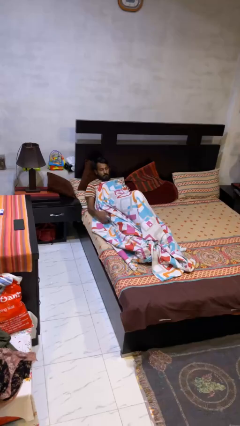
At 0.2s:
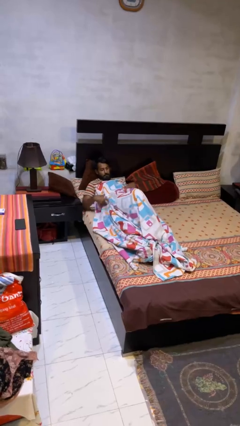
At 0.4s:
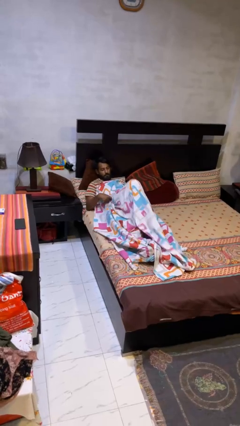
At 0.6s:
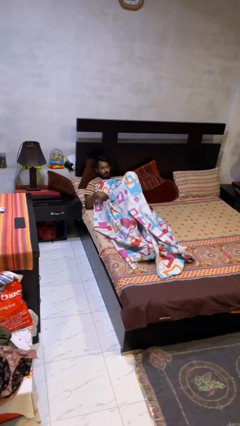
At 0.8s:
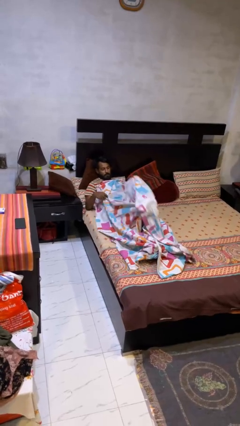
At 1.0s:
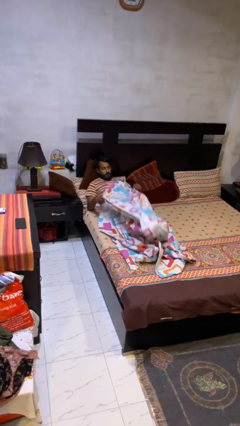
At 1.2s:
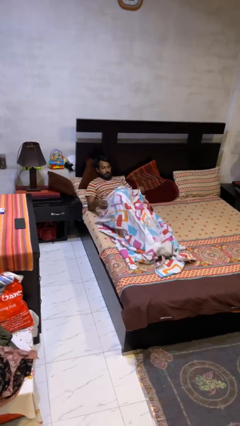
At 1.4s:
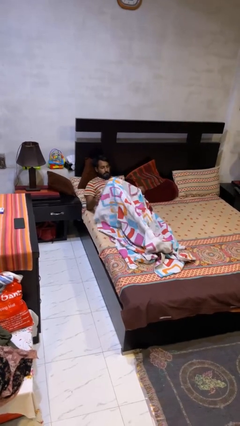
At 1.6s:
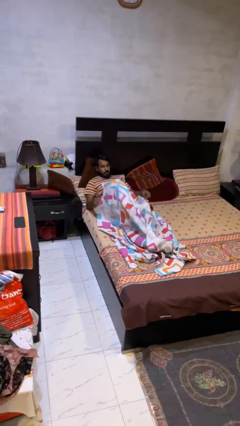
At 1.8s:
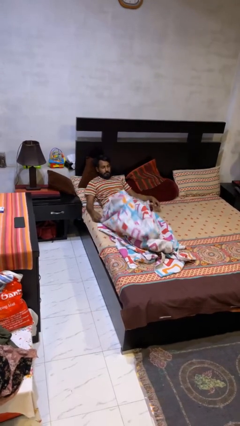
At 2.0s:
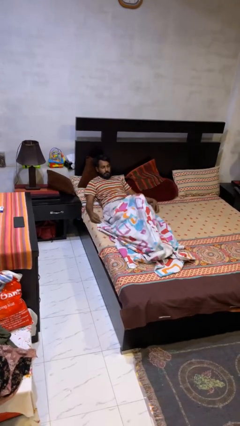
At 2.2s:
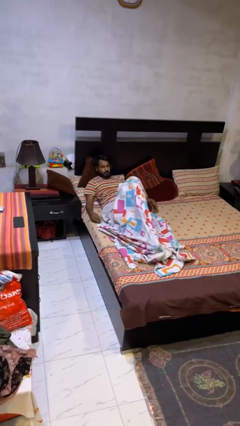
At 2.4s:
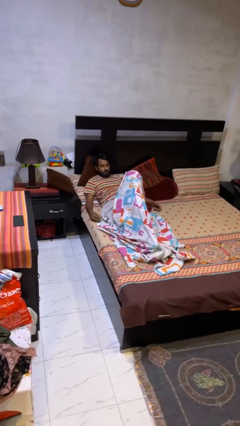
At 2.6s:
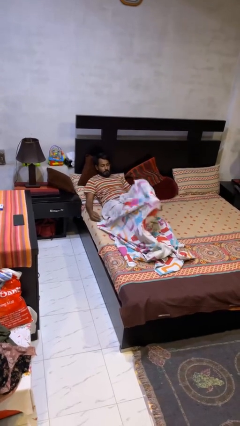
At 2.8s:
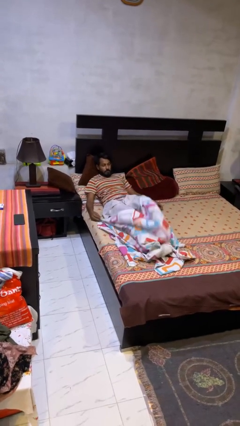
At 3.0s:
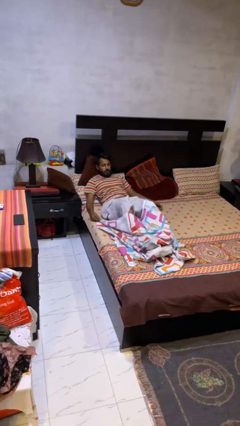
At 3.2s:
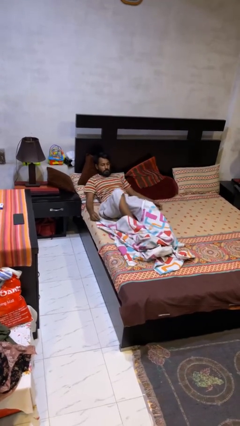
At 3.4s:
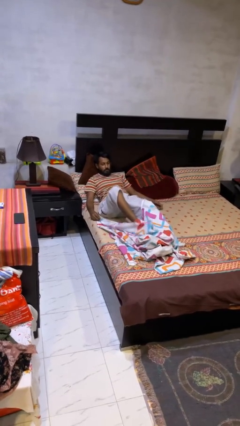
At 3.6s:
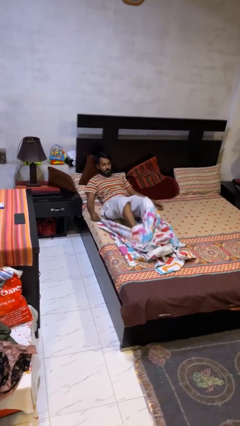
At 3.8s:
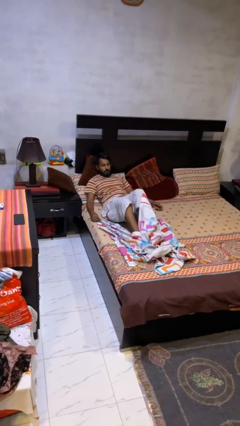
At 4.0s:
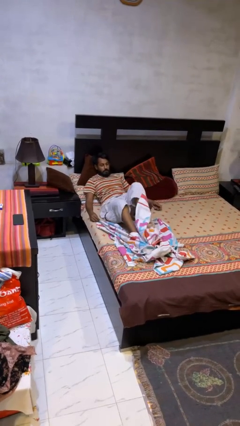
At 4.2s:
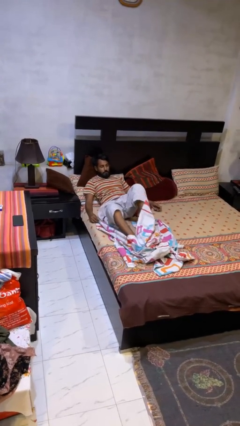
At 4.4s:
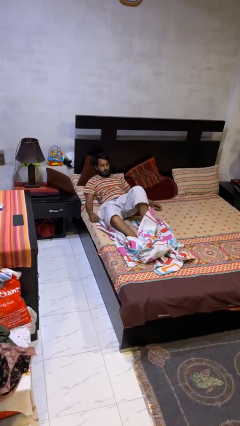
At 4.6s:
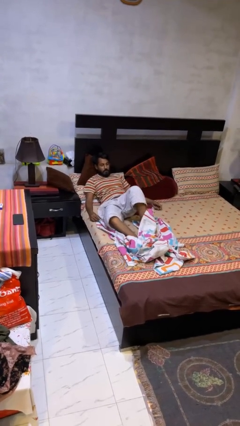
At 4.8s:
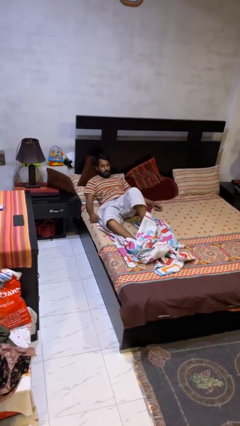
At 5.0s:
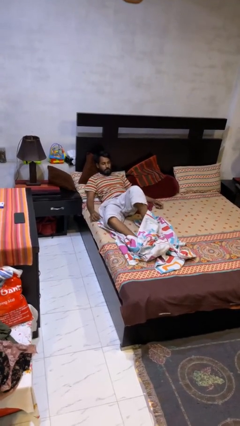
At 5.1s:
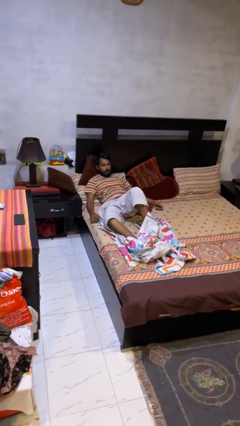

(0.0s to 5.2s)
person uncovers with bedsheets

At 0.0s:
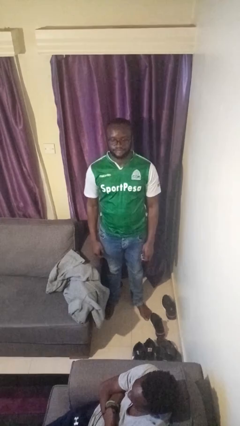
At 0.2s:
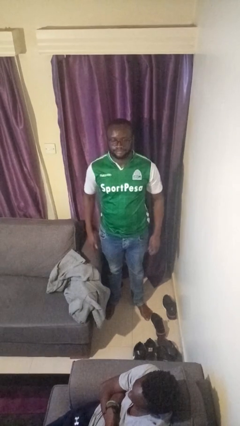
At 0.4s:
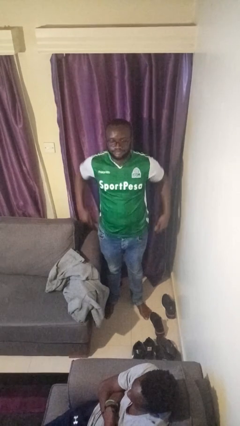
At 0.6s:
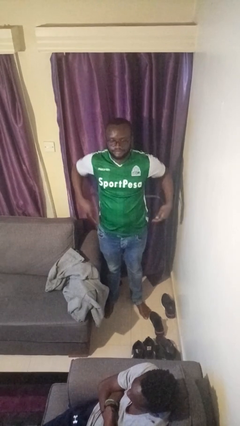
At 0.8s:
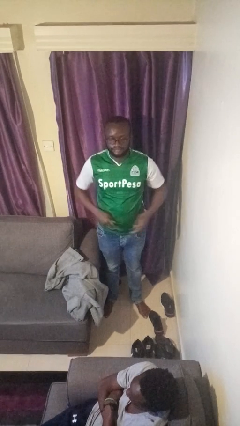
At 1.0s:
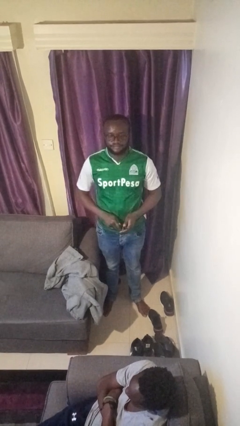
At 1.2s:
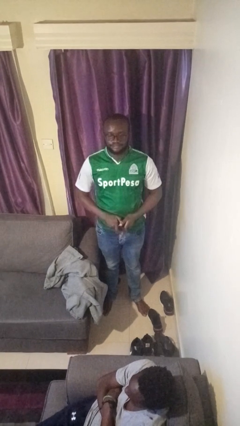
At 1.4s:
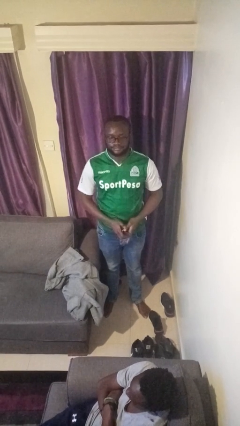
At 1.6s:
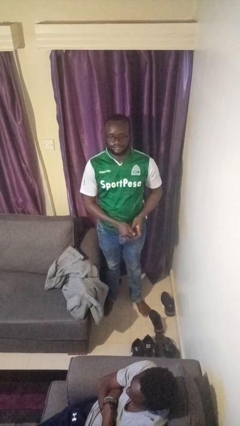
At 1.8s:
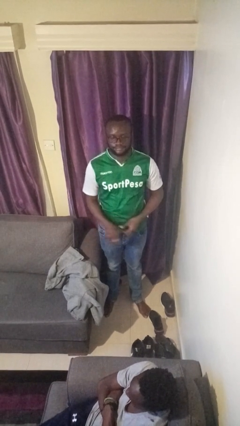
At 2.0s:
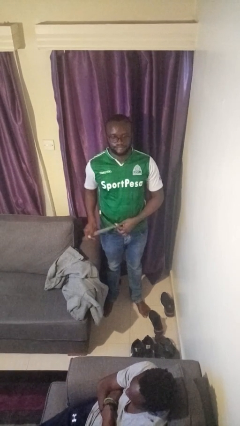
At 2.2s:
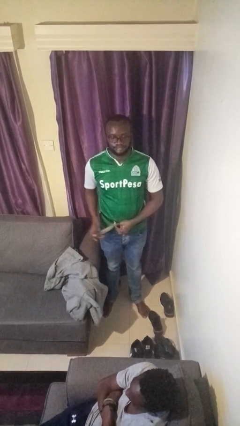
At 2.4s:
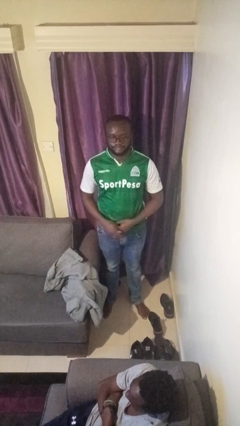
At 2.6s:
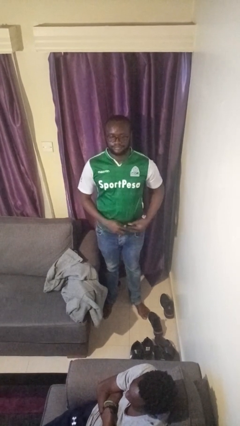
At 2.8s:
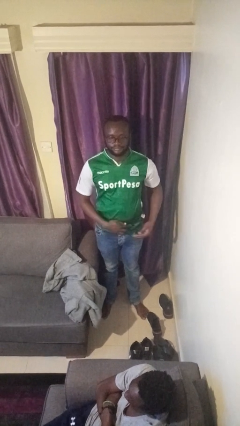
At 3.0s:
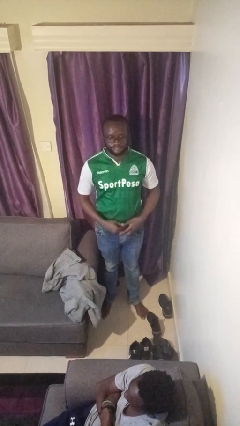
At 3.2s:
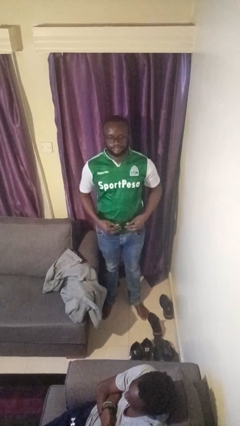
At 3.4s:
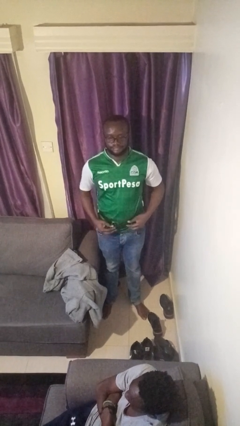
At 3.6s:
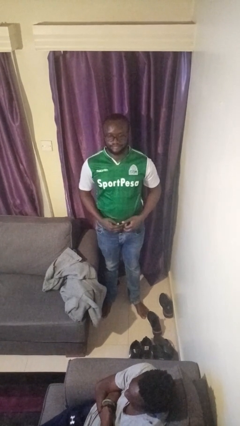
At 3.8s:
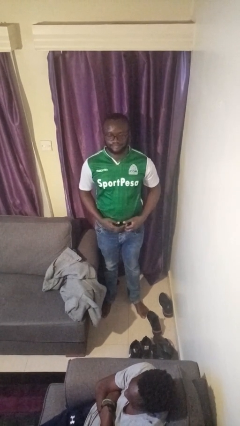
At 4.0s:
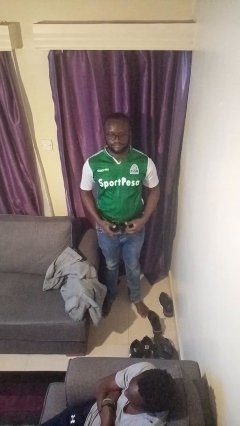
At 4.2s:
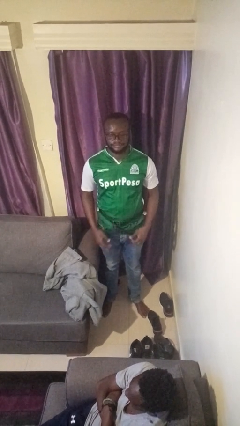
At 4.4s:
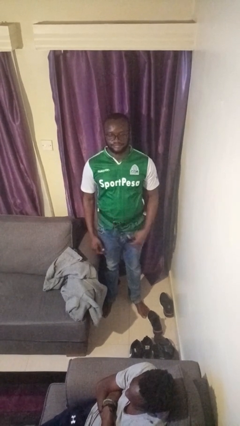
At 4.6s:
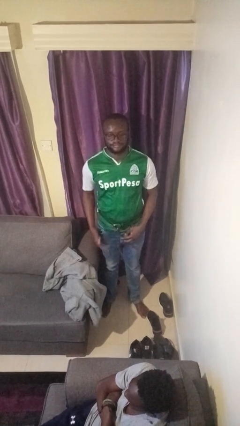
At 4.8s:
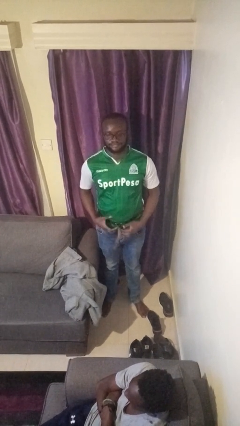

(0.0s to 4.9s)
person puts on belt

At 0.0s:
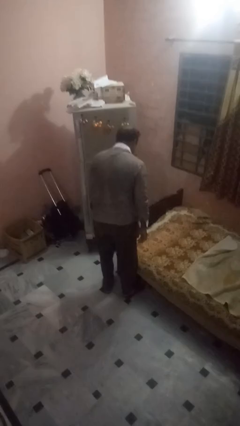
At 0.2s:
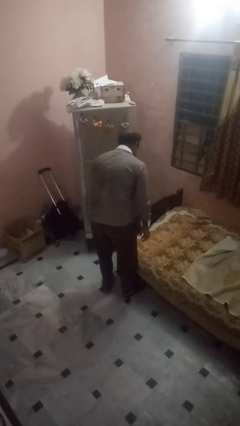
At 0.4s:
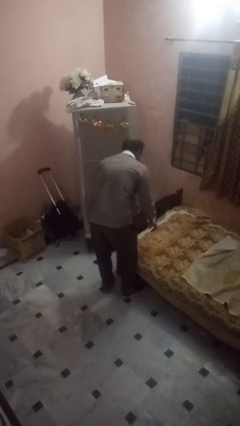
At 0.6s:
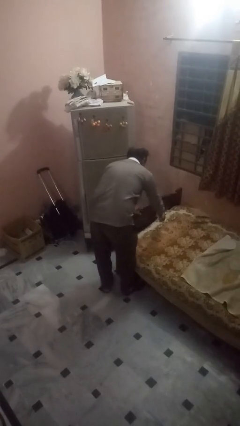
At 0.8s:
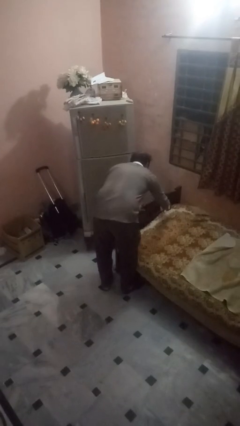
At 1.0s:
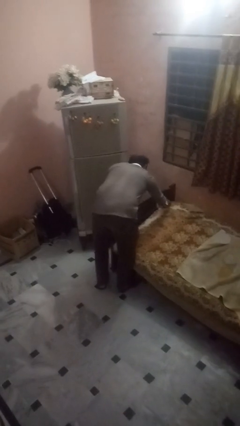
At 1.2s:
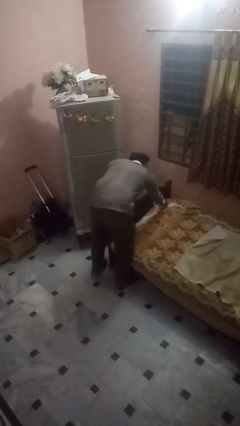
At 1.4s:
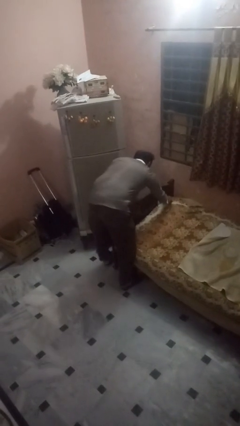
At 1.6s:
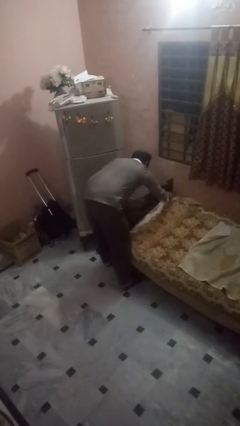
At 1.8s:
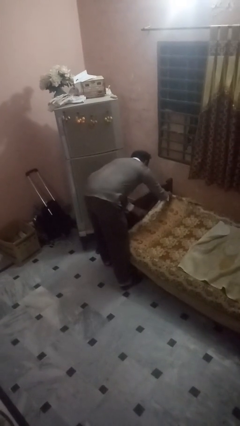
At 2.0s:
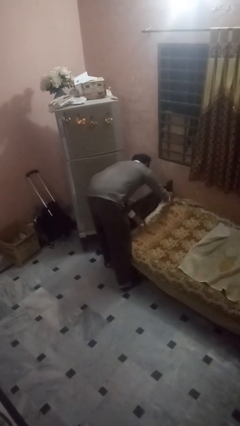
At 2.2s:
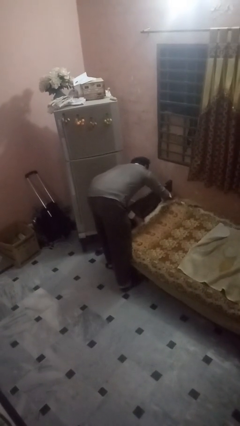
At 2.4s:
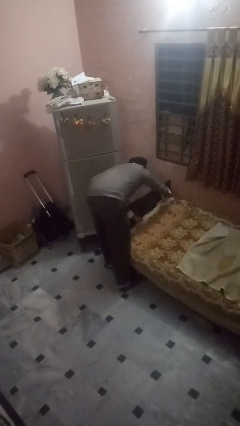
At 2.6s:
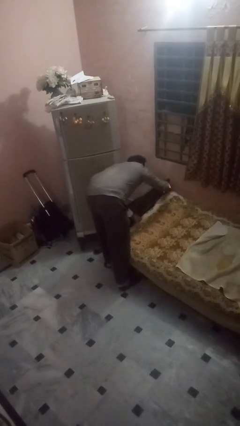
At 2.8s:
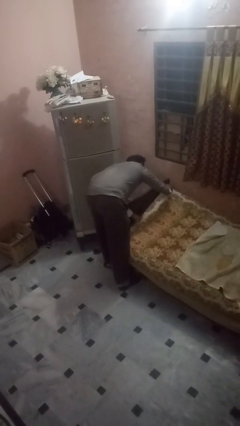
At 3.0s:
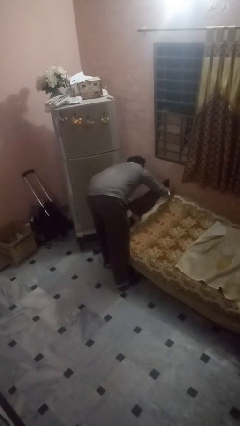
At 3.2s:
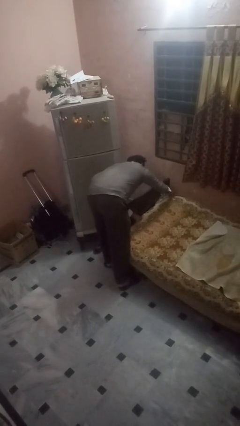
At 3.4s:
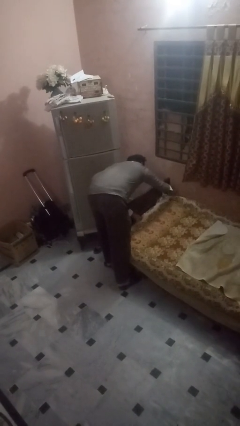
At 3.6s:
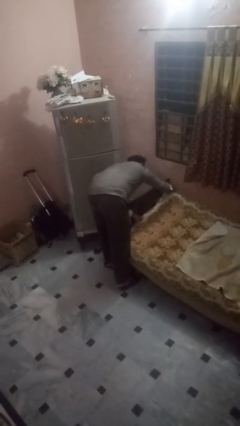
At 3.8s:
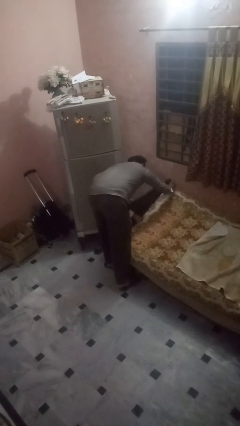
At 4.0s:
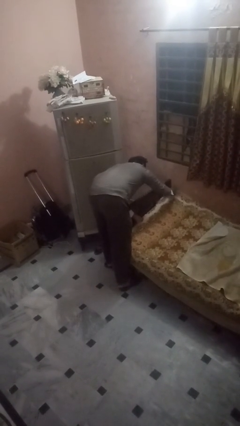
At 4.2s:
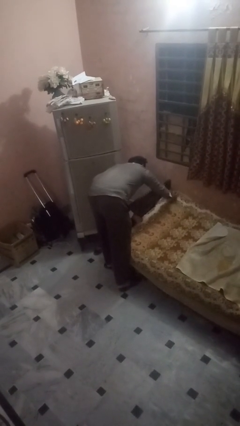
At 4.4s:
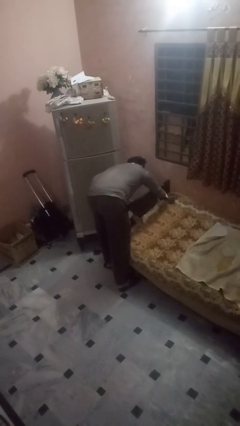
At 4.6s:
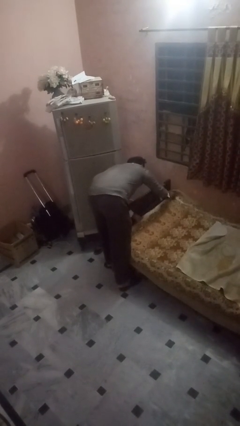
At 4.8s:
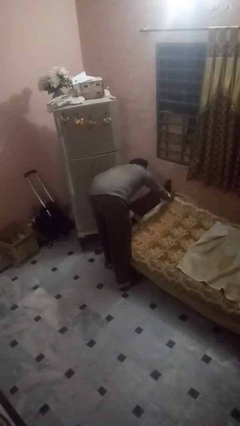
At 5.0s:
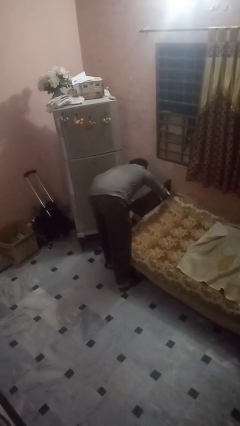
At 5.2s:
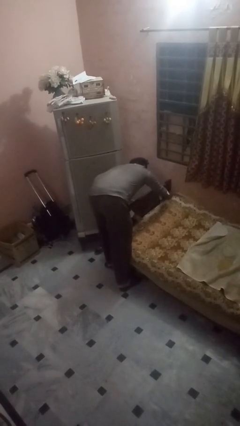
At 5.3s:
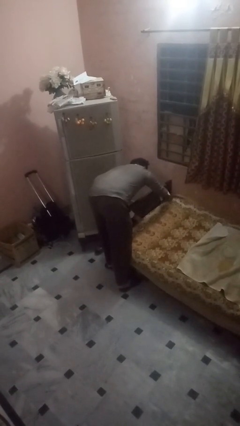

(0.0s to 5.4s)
person makes bed

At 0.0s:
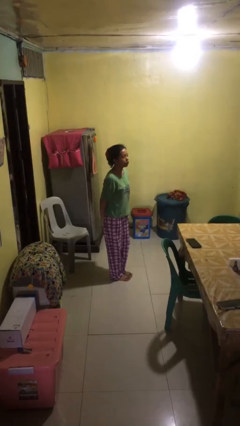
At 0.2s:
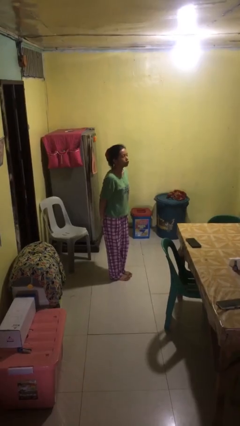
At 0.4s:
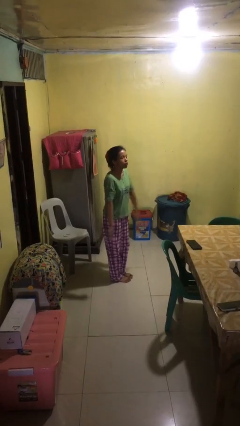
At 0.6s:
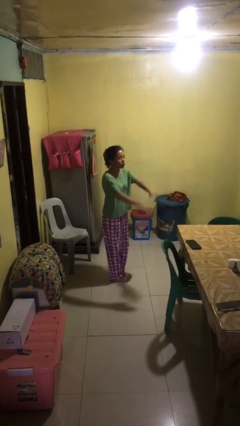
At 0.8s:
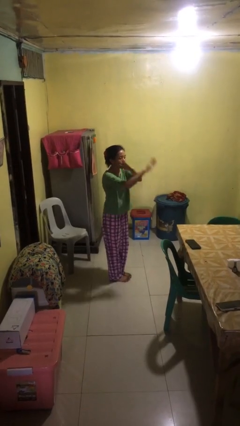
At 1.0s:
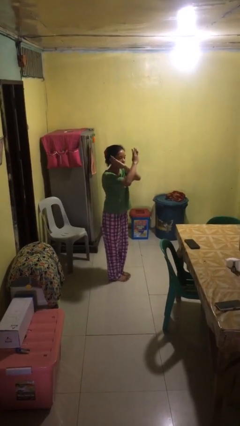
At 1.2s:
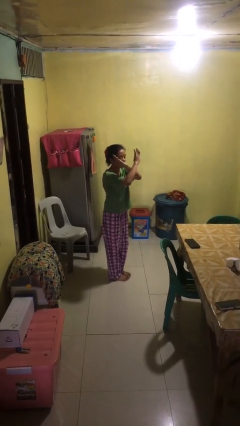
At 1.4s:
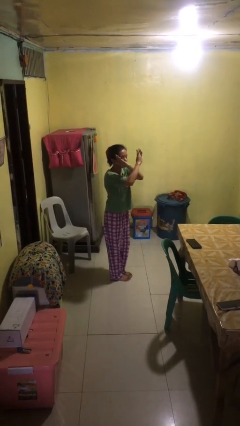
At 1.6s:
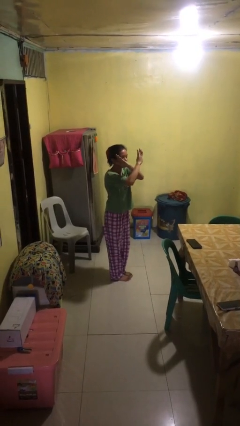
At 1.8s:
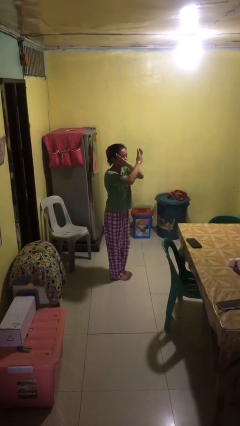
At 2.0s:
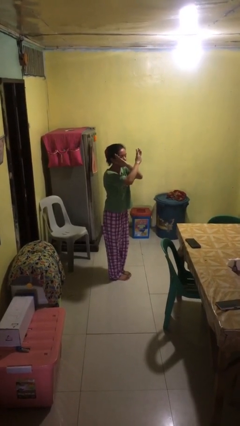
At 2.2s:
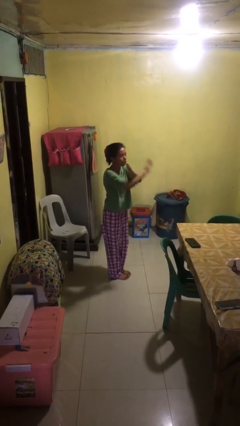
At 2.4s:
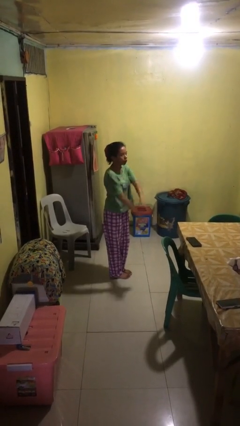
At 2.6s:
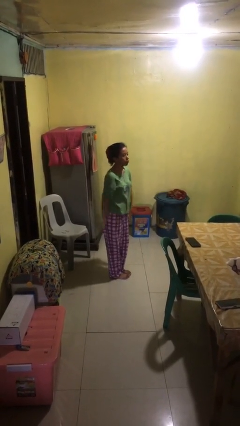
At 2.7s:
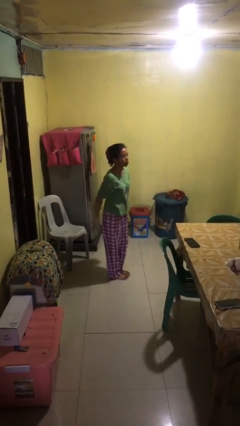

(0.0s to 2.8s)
person gestures arms x
